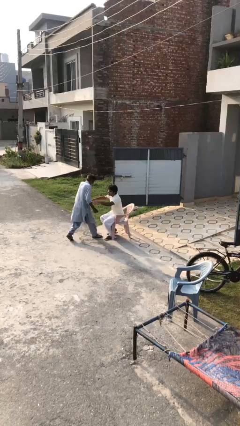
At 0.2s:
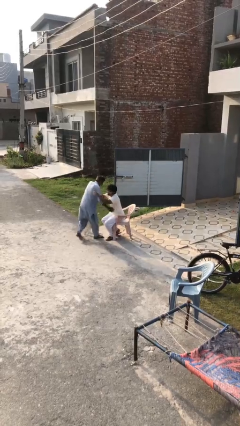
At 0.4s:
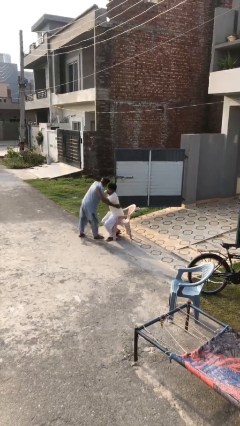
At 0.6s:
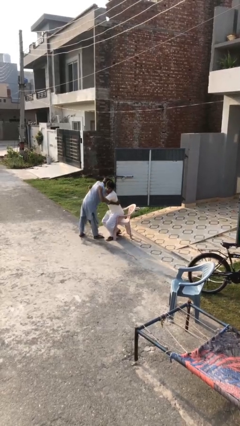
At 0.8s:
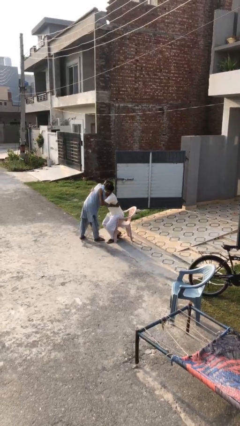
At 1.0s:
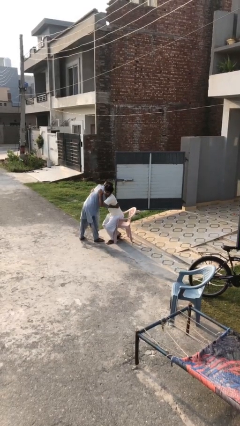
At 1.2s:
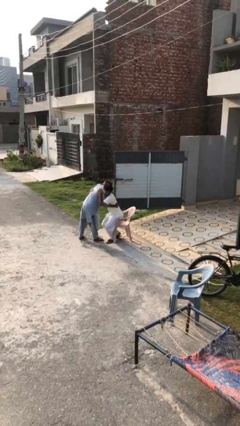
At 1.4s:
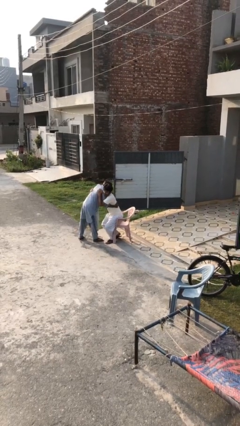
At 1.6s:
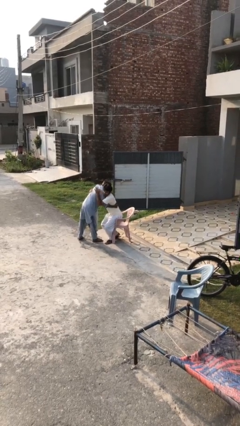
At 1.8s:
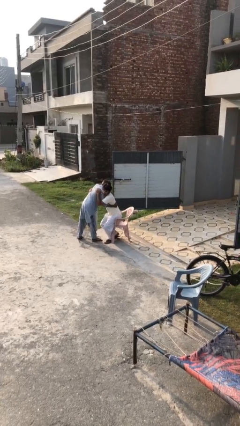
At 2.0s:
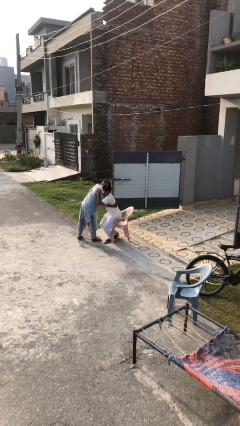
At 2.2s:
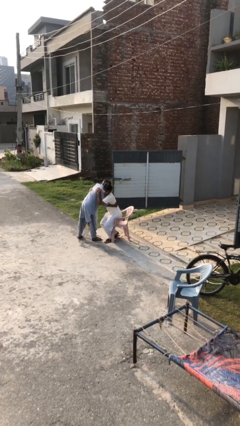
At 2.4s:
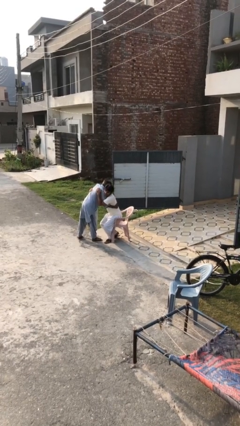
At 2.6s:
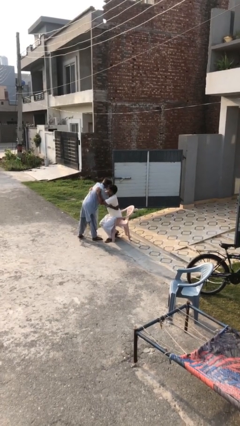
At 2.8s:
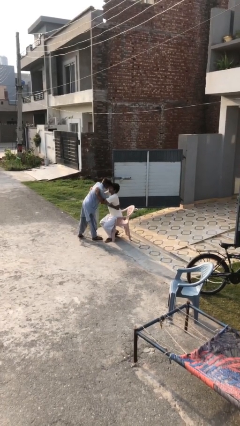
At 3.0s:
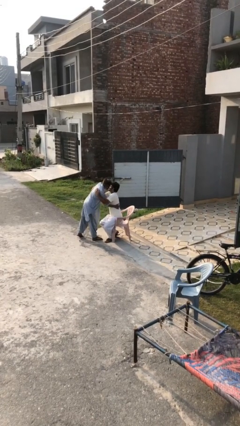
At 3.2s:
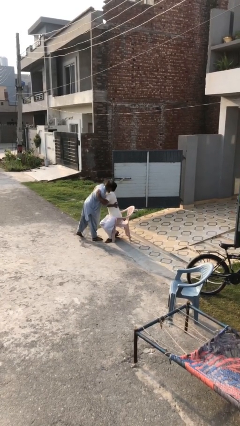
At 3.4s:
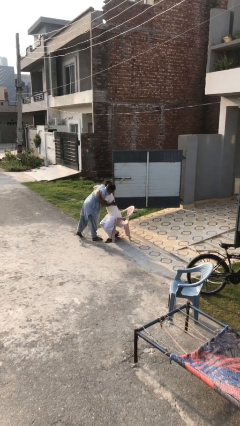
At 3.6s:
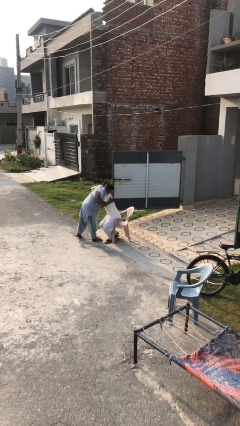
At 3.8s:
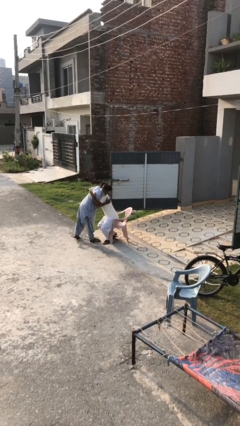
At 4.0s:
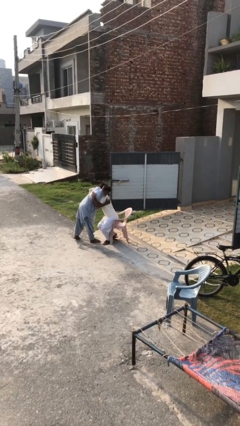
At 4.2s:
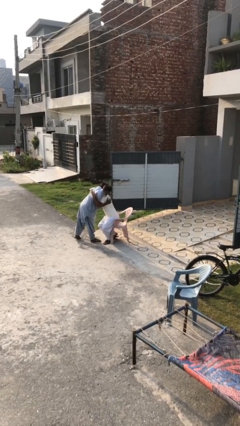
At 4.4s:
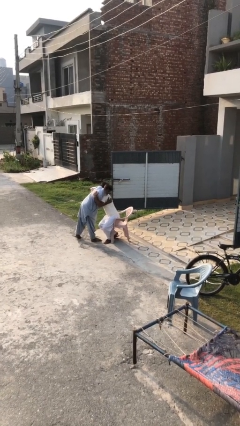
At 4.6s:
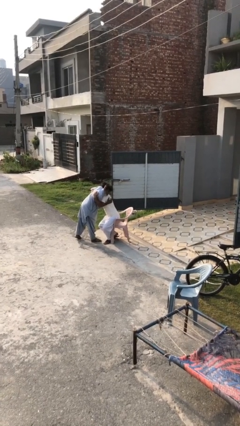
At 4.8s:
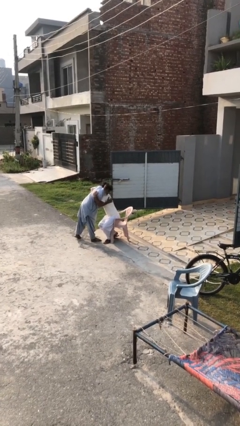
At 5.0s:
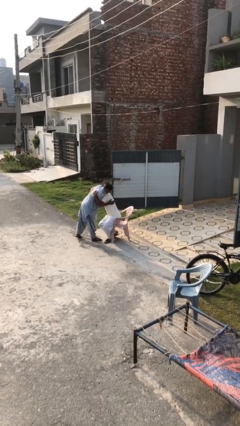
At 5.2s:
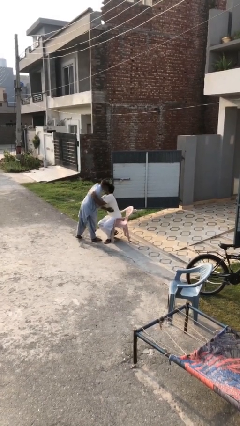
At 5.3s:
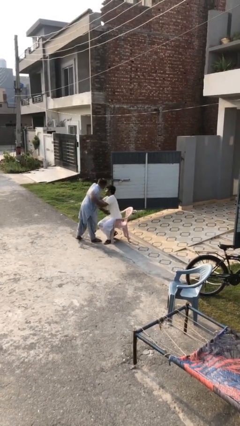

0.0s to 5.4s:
person embraces person

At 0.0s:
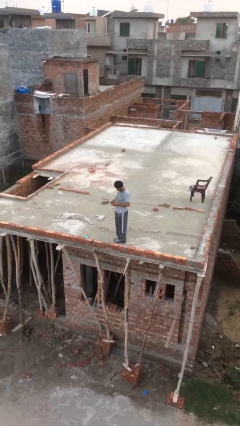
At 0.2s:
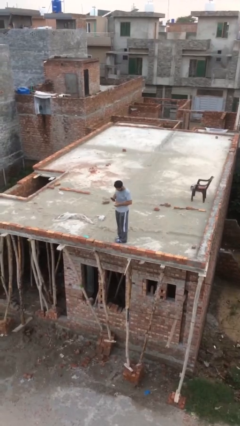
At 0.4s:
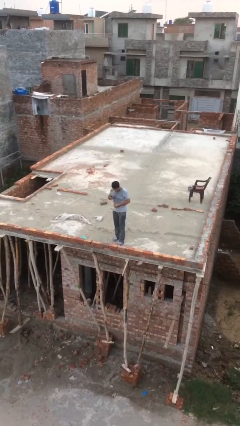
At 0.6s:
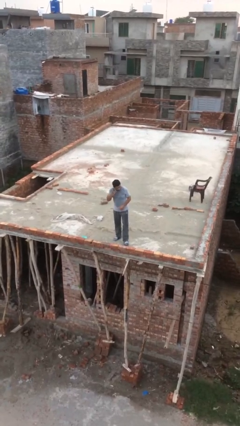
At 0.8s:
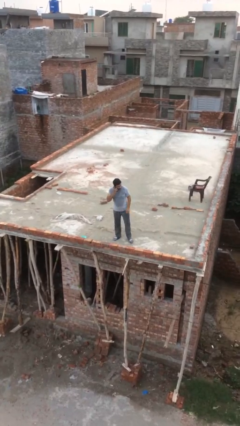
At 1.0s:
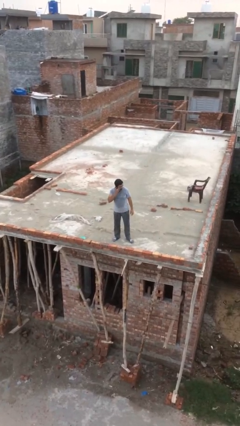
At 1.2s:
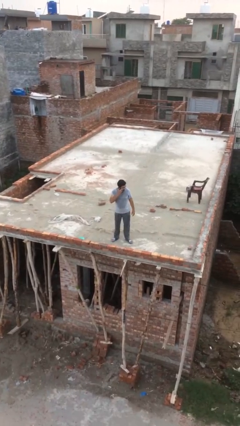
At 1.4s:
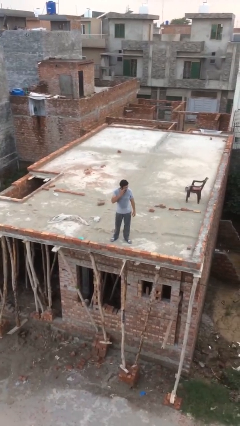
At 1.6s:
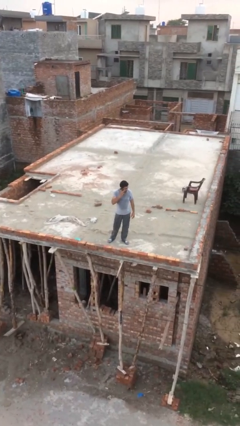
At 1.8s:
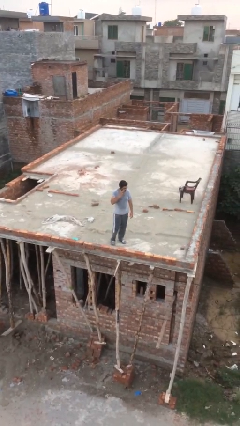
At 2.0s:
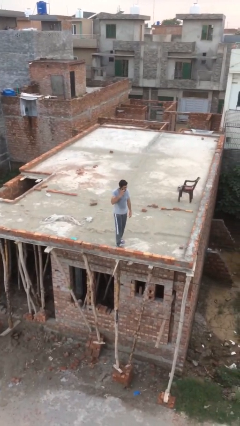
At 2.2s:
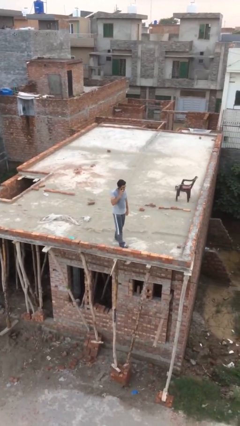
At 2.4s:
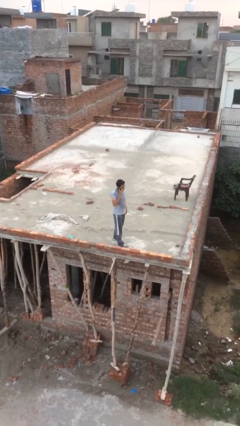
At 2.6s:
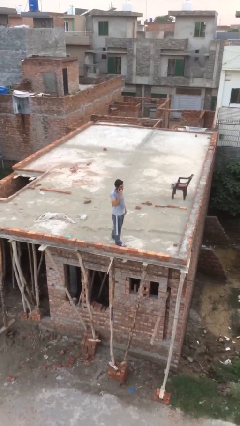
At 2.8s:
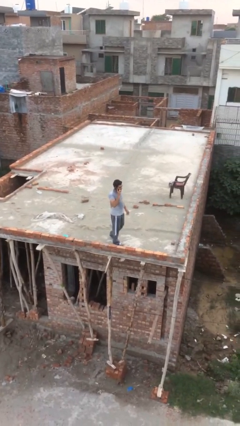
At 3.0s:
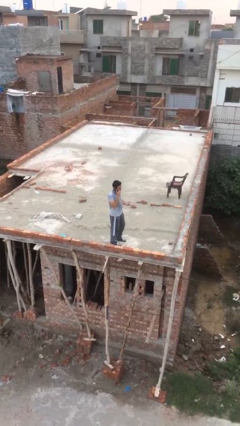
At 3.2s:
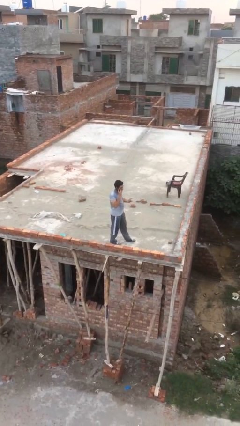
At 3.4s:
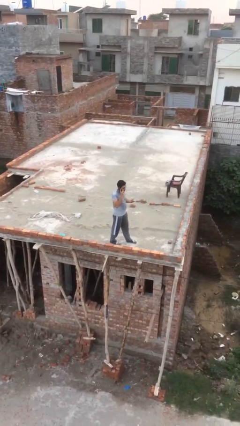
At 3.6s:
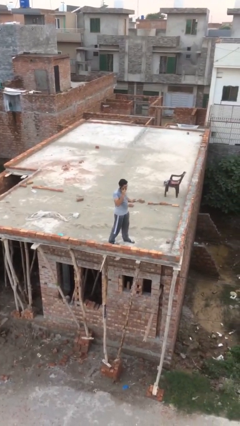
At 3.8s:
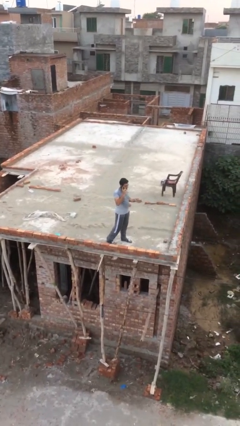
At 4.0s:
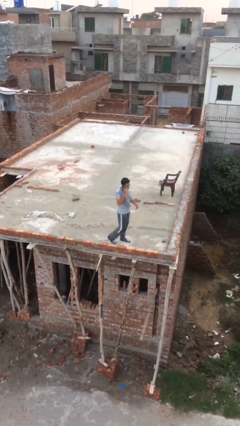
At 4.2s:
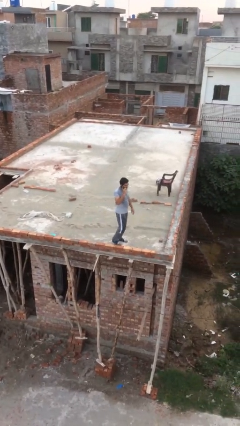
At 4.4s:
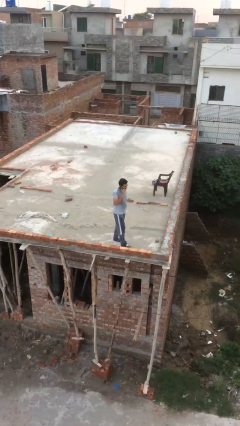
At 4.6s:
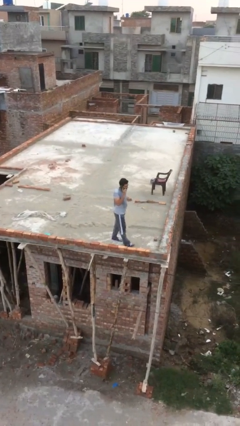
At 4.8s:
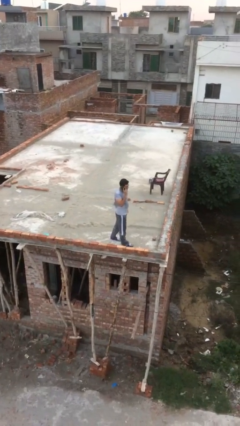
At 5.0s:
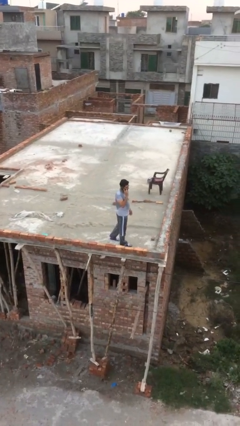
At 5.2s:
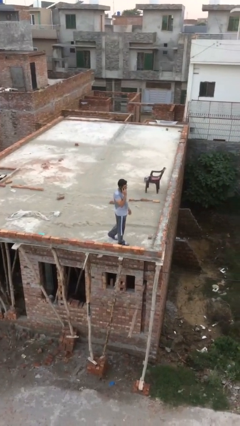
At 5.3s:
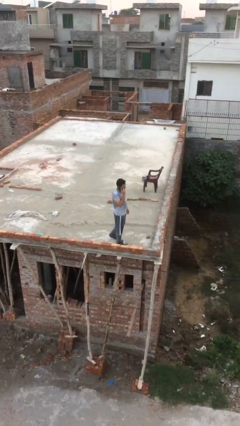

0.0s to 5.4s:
person talks on phone

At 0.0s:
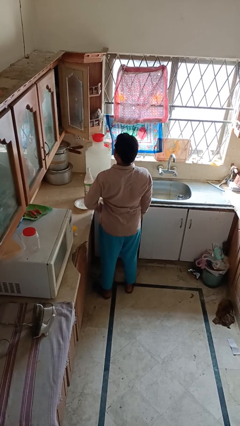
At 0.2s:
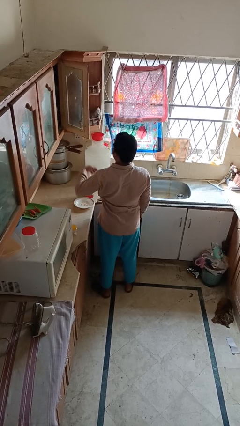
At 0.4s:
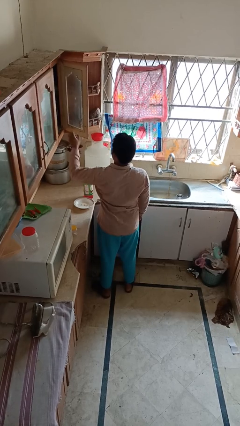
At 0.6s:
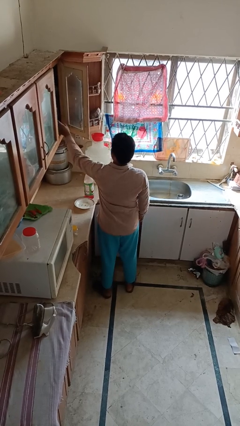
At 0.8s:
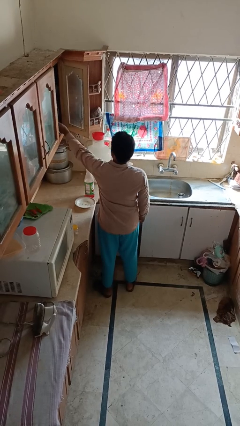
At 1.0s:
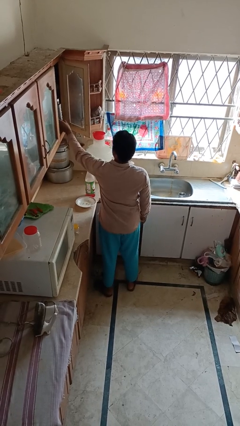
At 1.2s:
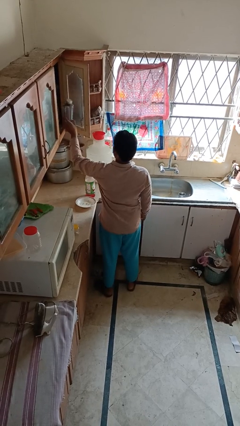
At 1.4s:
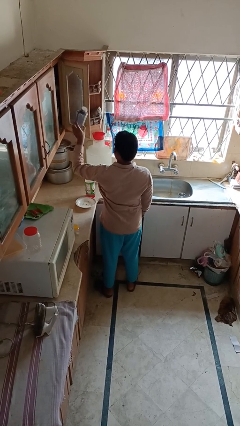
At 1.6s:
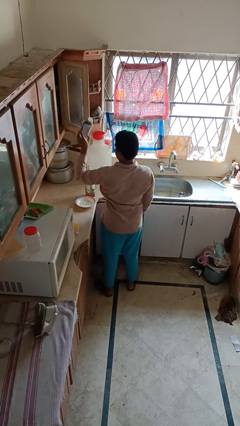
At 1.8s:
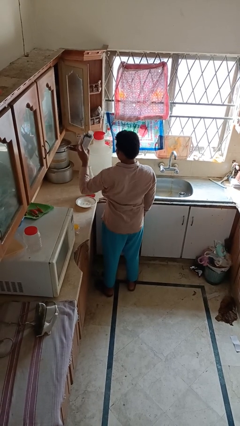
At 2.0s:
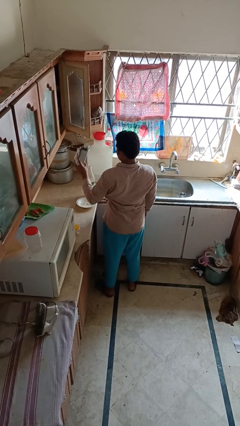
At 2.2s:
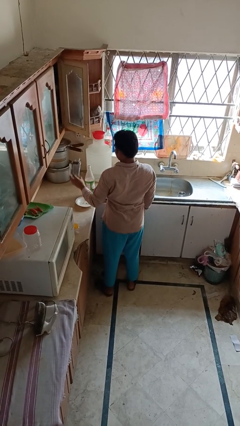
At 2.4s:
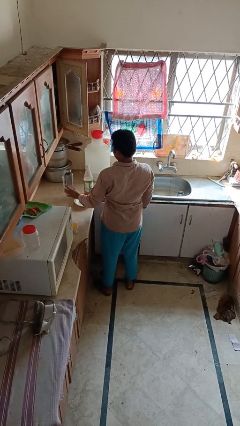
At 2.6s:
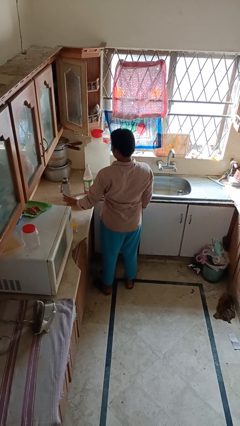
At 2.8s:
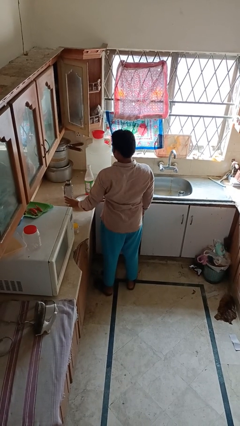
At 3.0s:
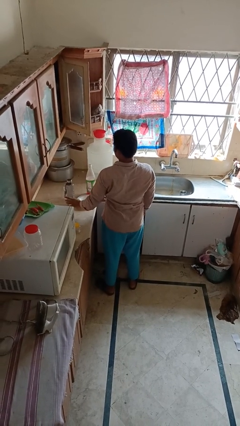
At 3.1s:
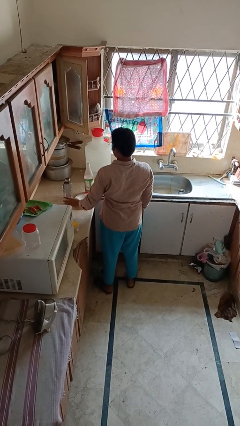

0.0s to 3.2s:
person takes object from cabinet

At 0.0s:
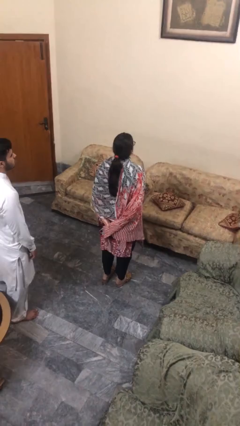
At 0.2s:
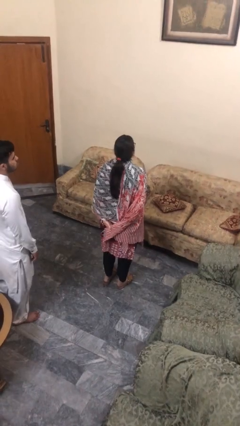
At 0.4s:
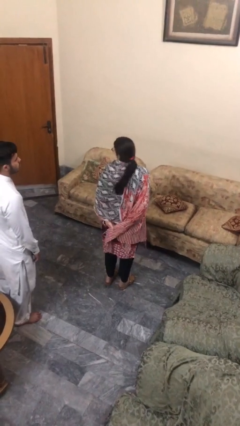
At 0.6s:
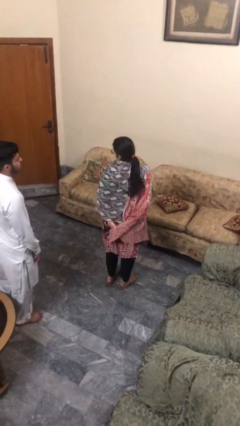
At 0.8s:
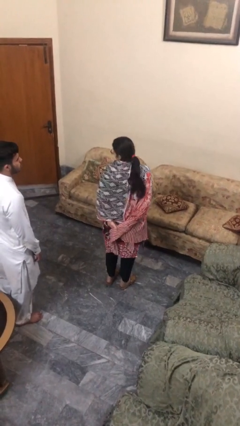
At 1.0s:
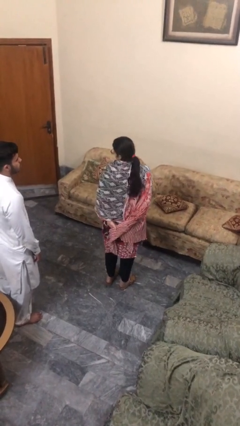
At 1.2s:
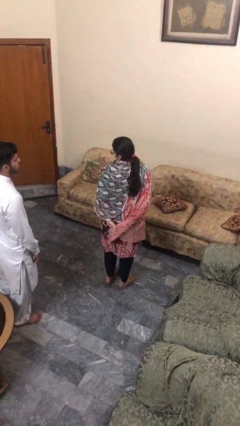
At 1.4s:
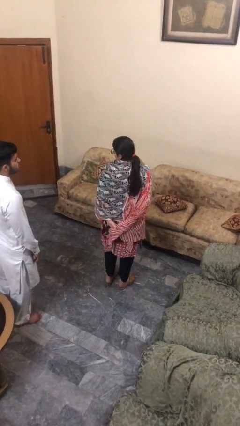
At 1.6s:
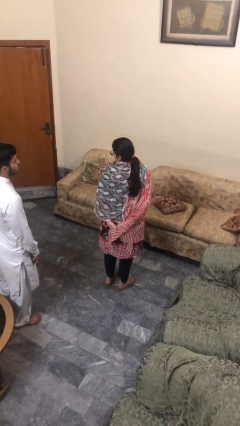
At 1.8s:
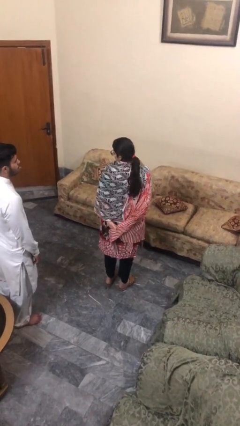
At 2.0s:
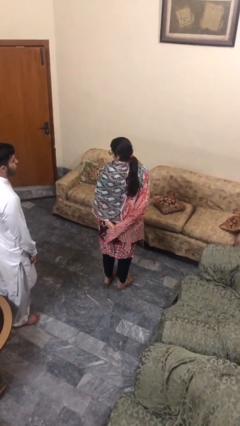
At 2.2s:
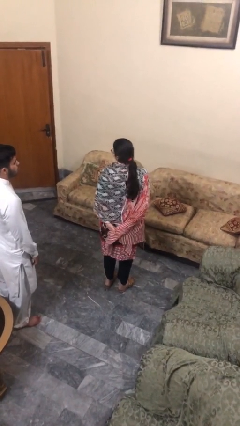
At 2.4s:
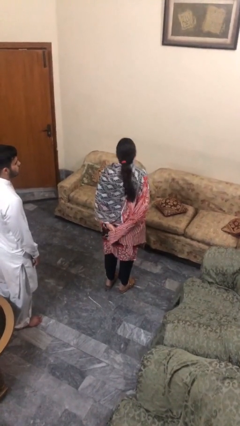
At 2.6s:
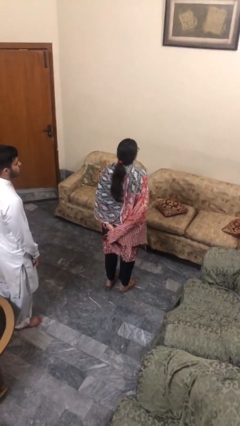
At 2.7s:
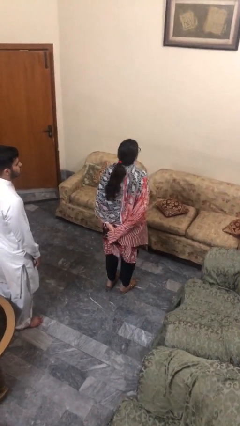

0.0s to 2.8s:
person looks over shoulder

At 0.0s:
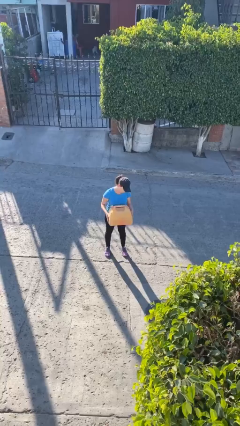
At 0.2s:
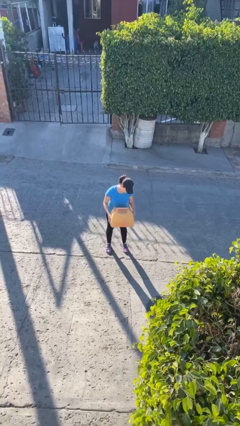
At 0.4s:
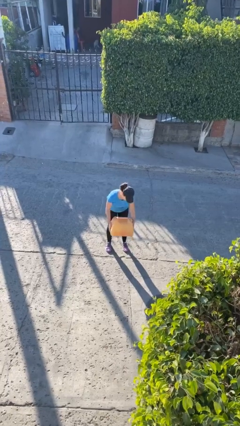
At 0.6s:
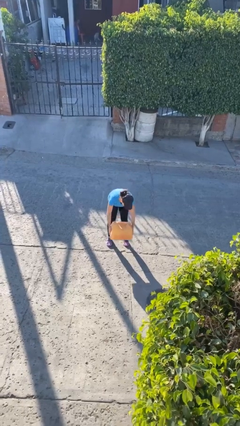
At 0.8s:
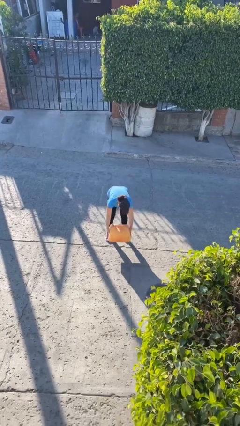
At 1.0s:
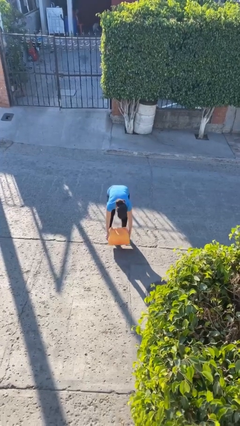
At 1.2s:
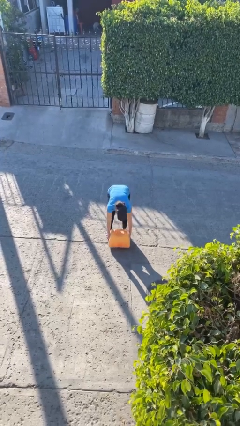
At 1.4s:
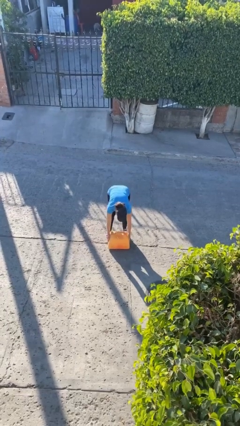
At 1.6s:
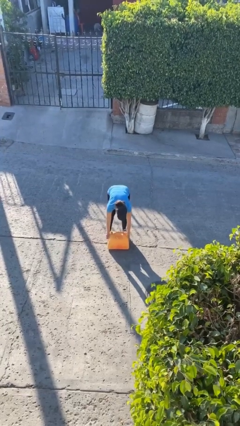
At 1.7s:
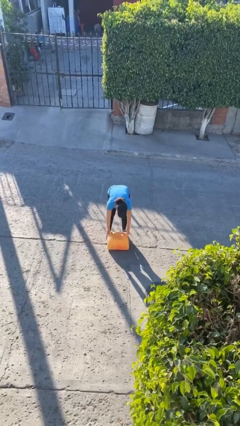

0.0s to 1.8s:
person puts down object on floor
